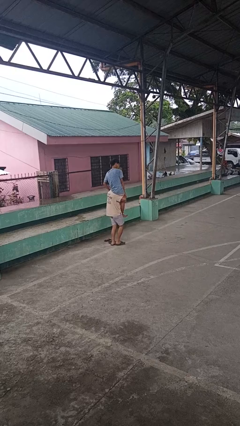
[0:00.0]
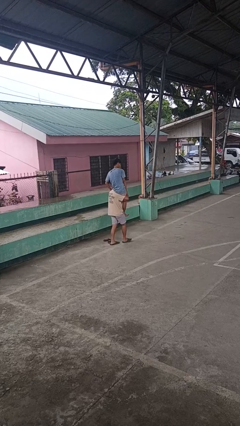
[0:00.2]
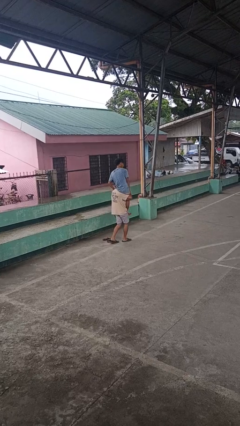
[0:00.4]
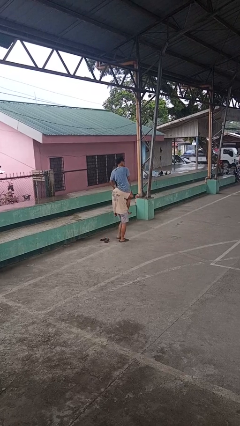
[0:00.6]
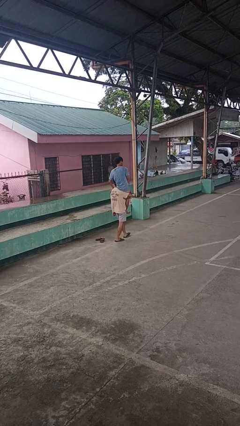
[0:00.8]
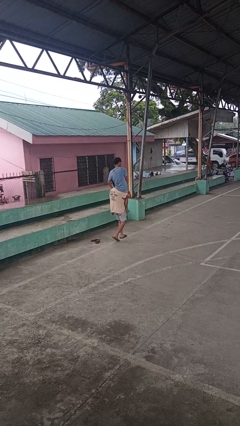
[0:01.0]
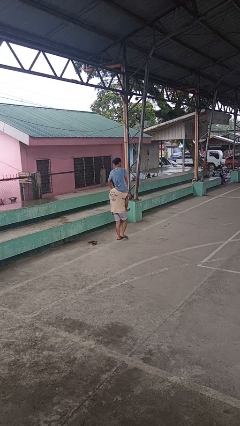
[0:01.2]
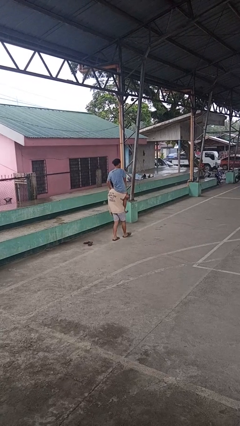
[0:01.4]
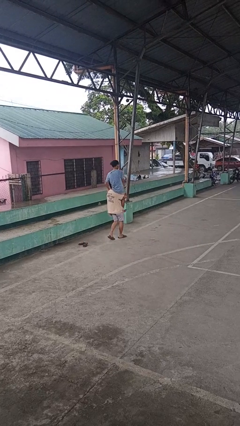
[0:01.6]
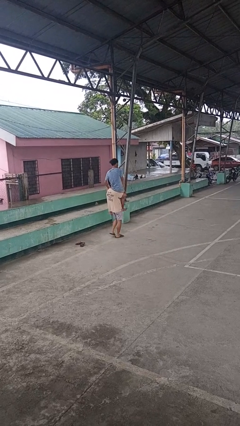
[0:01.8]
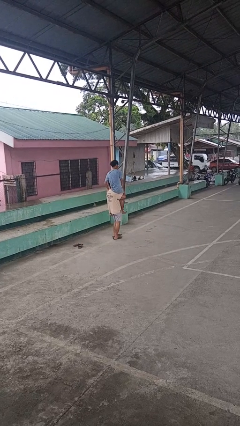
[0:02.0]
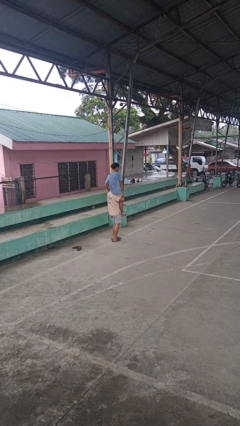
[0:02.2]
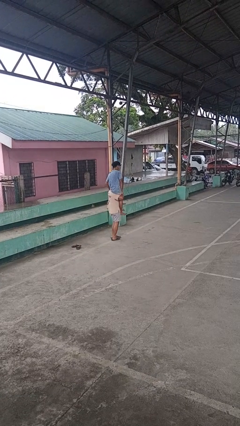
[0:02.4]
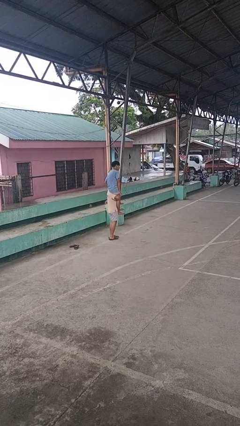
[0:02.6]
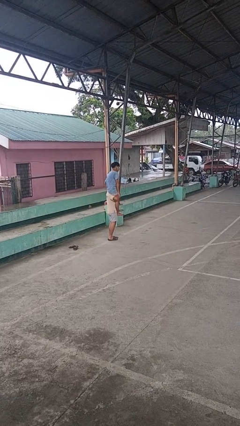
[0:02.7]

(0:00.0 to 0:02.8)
person carries person on shoulders

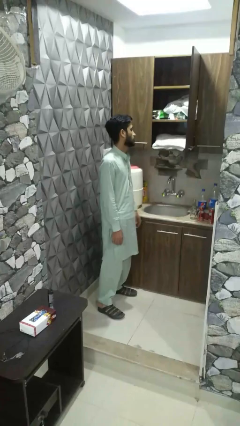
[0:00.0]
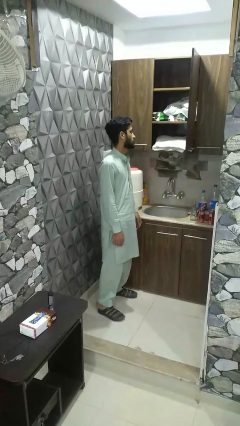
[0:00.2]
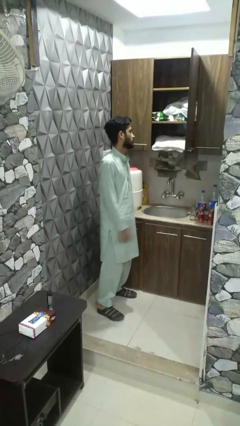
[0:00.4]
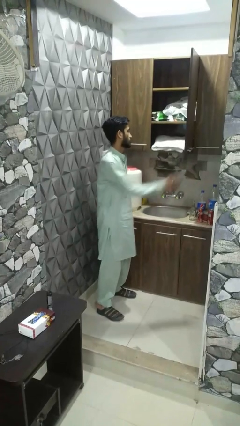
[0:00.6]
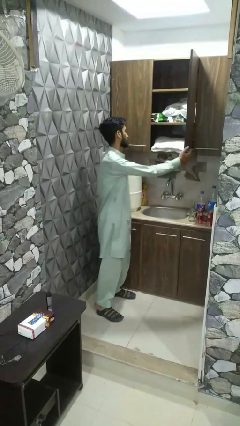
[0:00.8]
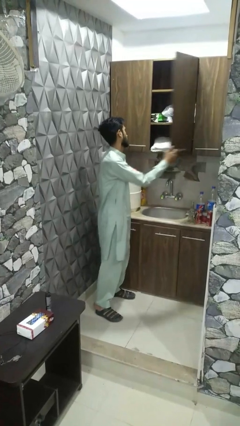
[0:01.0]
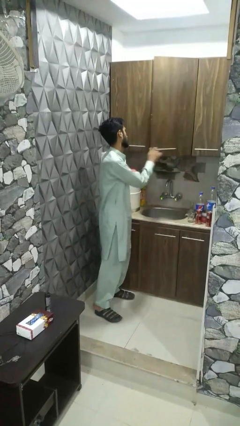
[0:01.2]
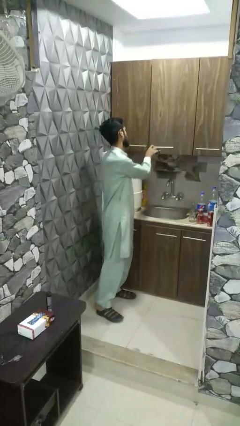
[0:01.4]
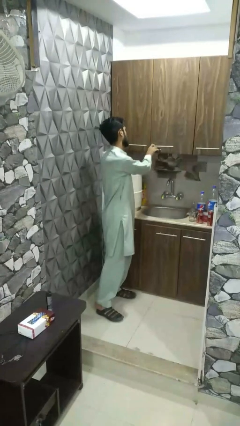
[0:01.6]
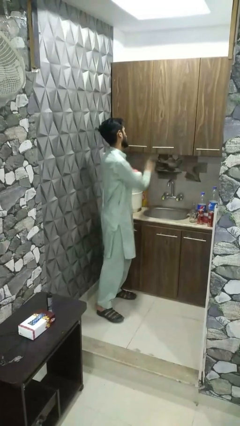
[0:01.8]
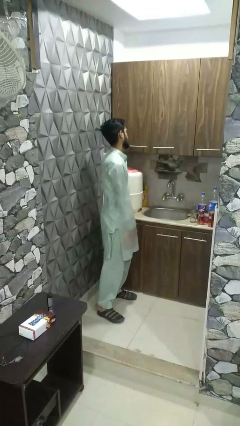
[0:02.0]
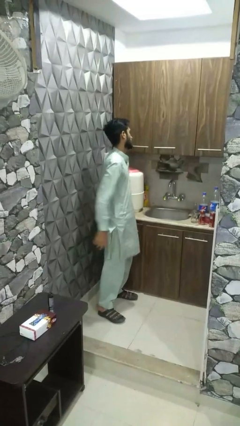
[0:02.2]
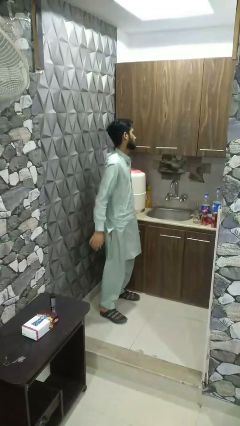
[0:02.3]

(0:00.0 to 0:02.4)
person closes dresser drawer

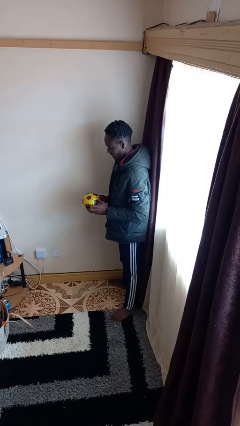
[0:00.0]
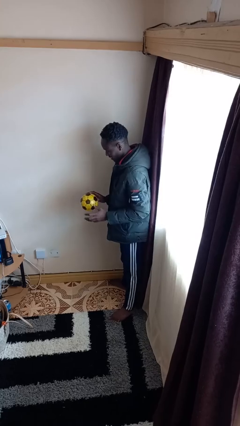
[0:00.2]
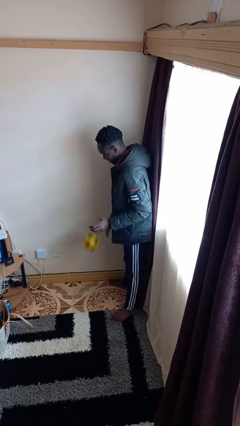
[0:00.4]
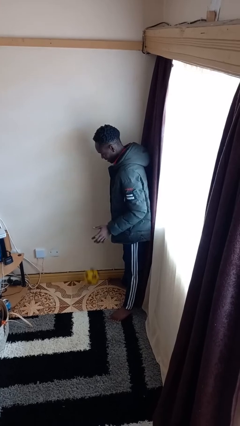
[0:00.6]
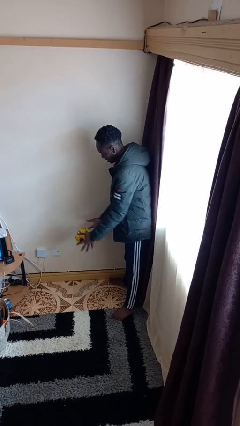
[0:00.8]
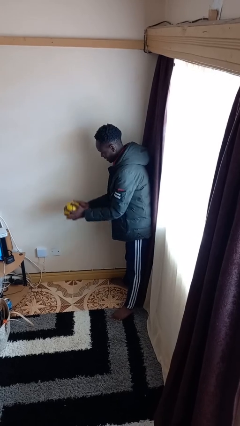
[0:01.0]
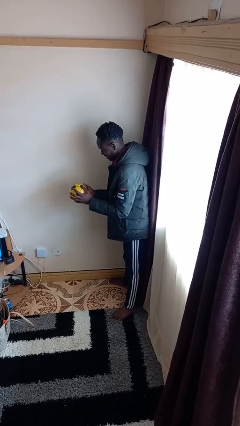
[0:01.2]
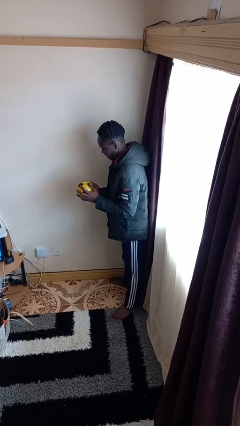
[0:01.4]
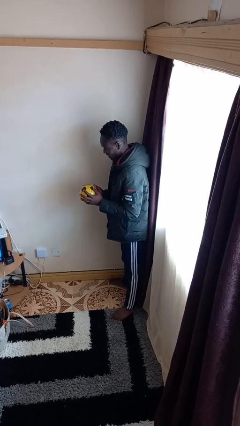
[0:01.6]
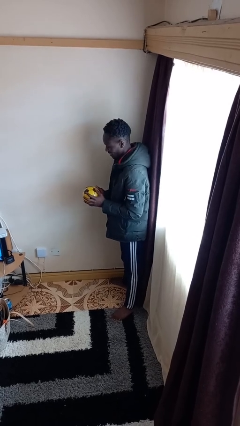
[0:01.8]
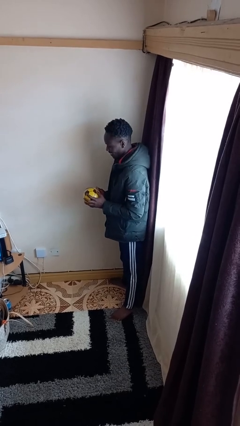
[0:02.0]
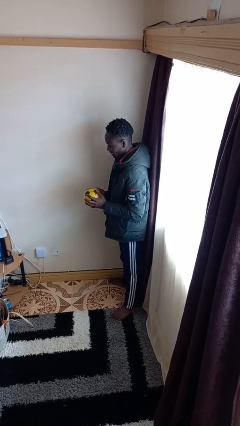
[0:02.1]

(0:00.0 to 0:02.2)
person bounces ball on floor

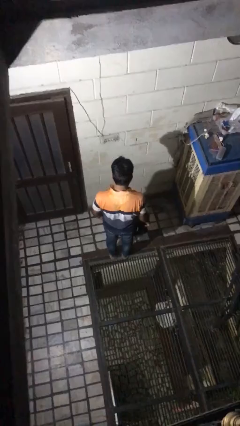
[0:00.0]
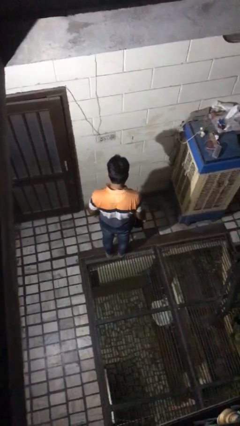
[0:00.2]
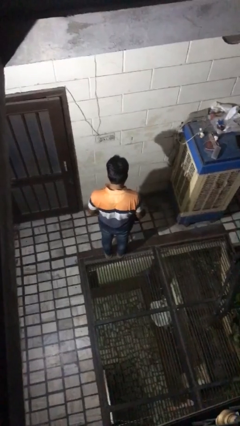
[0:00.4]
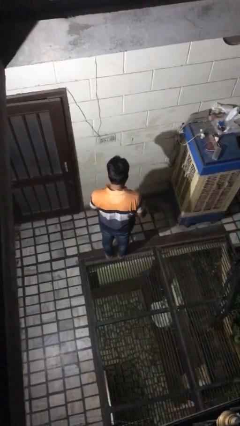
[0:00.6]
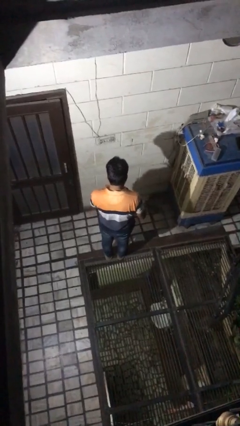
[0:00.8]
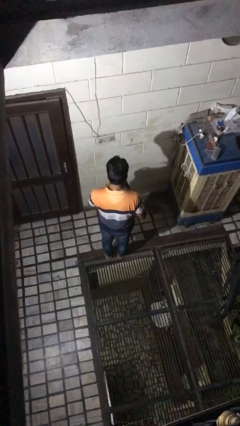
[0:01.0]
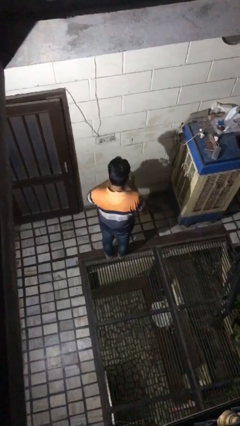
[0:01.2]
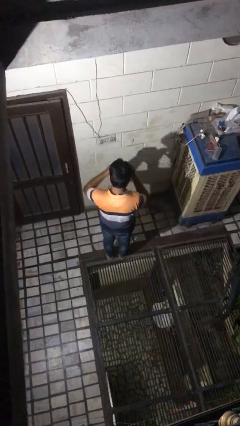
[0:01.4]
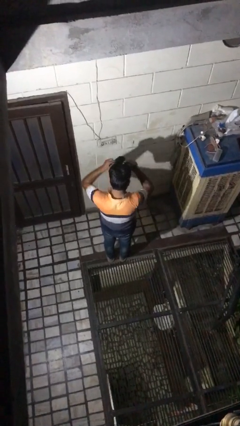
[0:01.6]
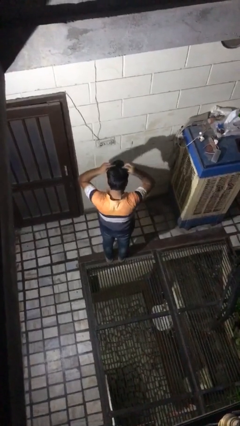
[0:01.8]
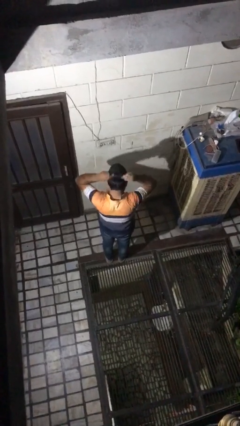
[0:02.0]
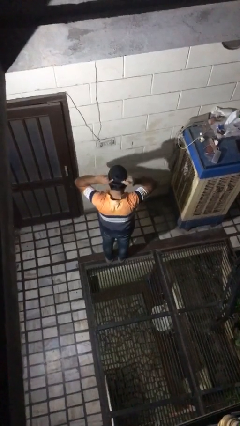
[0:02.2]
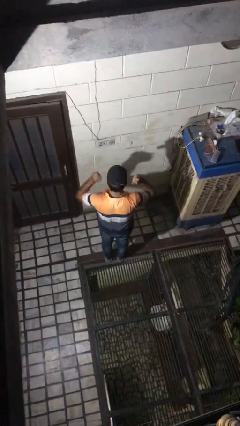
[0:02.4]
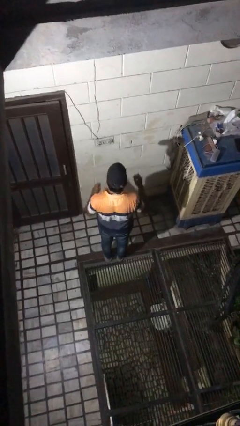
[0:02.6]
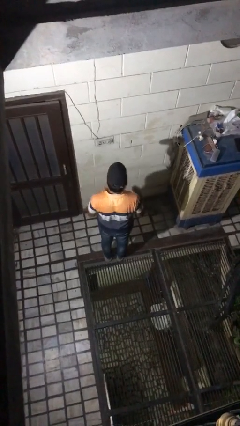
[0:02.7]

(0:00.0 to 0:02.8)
person puts on hat

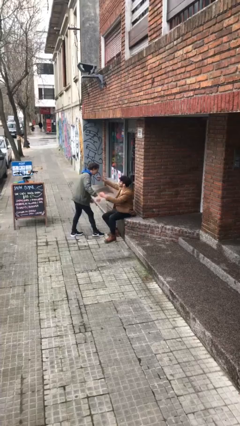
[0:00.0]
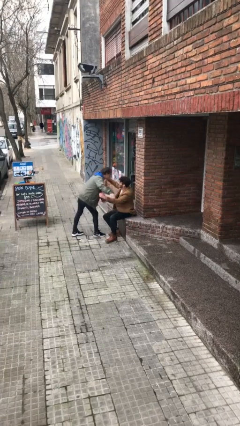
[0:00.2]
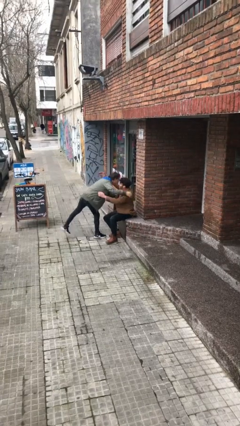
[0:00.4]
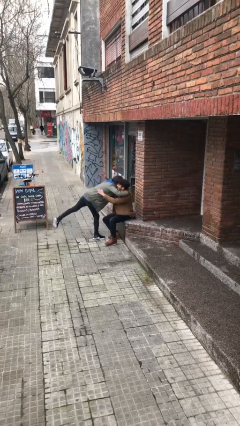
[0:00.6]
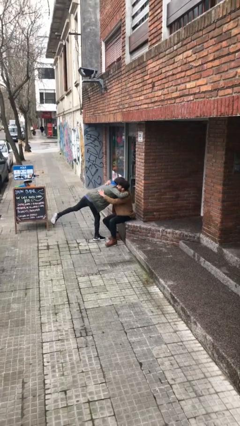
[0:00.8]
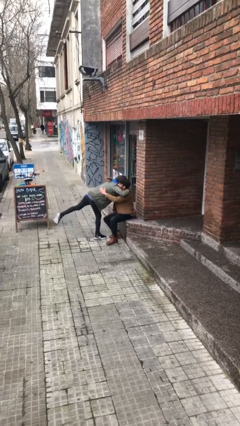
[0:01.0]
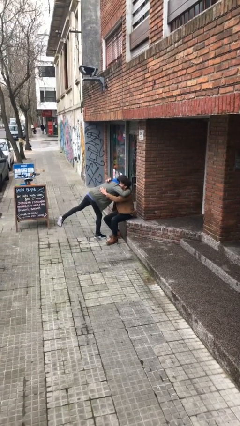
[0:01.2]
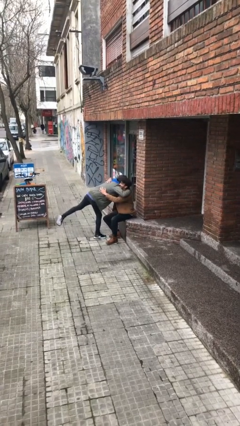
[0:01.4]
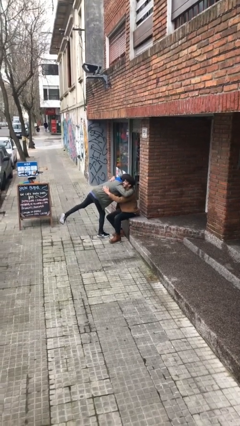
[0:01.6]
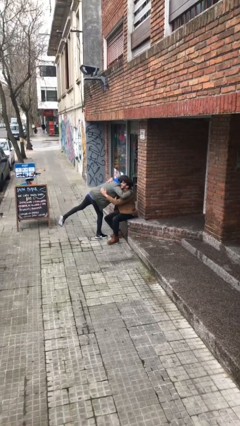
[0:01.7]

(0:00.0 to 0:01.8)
person embraces person

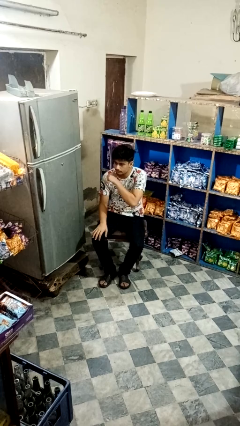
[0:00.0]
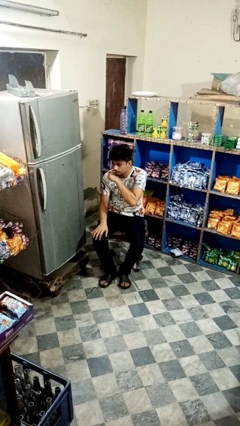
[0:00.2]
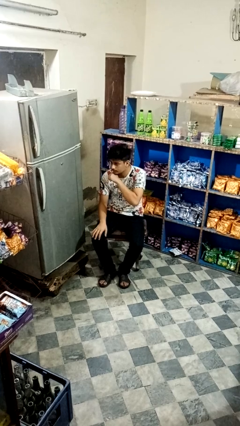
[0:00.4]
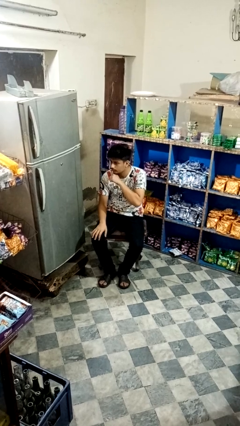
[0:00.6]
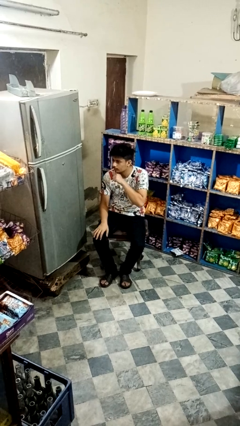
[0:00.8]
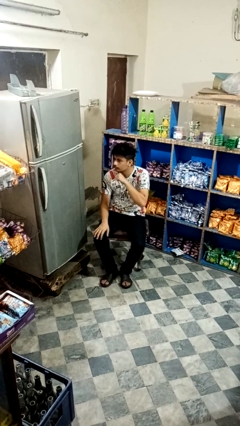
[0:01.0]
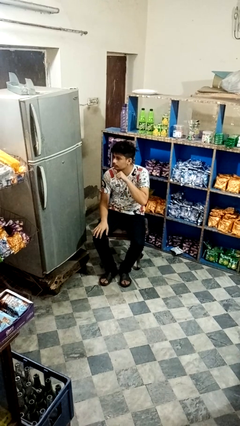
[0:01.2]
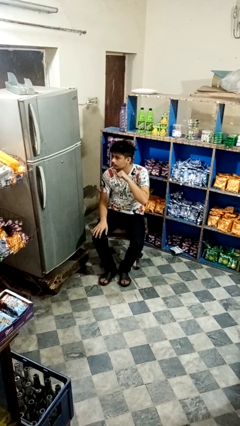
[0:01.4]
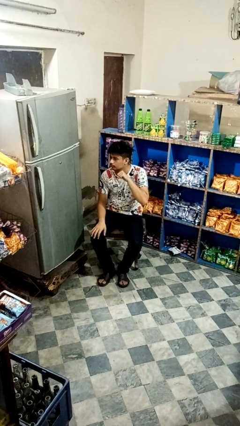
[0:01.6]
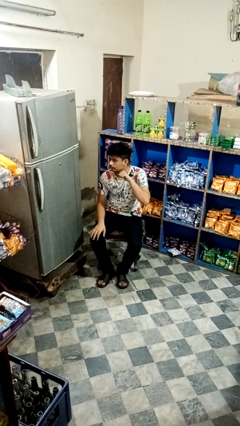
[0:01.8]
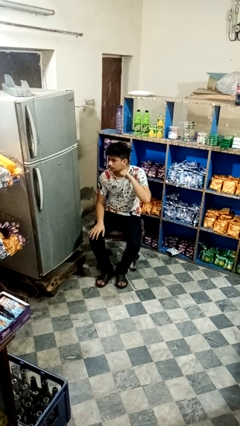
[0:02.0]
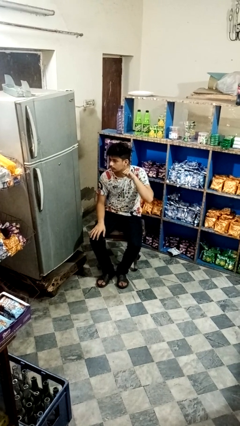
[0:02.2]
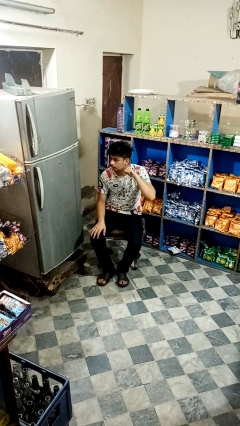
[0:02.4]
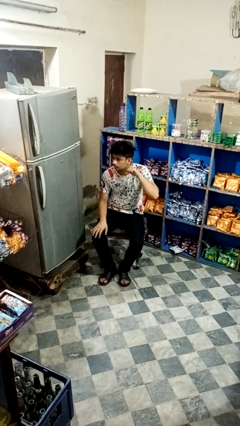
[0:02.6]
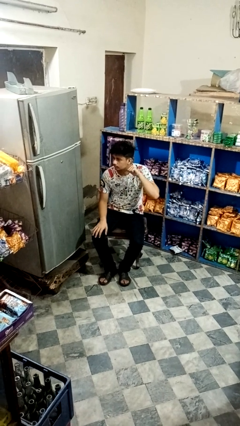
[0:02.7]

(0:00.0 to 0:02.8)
person gestures cut

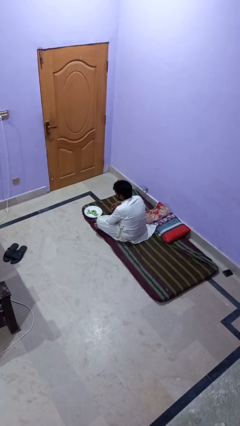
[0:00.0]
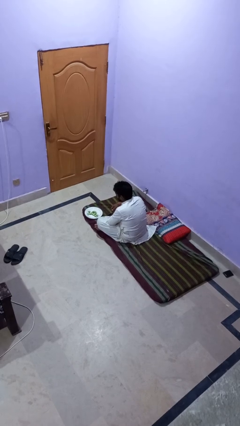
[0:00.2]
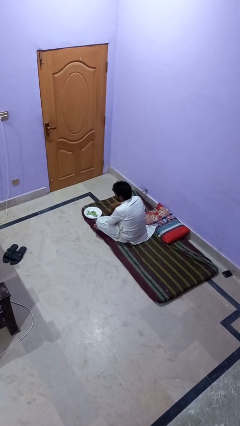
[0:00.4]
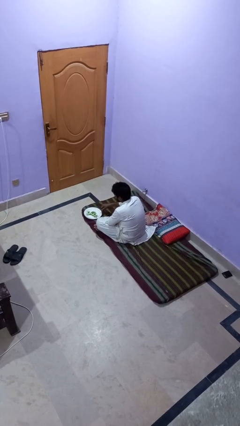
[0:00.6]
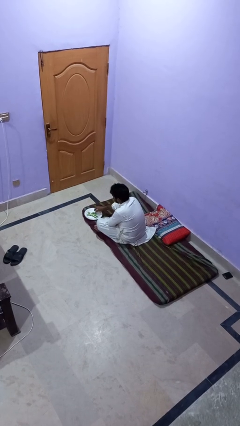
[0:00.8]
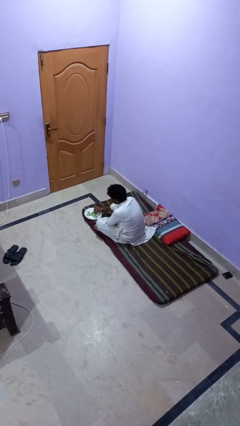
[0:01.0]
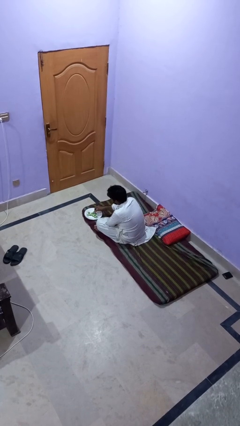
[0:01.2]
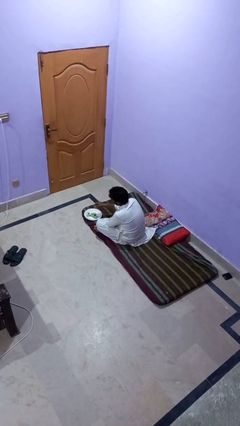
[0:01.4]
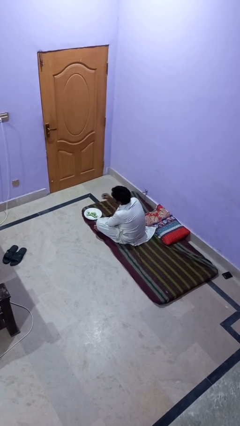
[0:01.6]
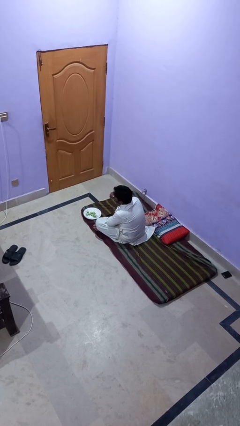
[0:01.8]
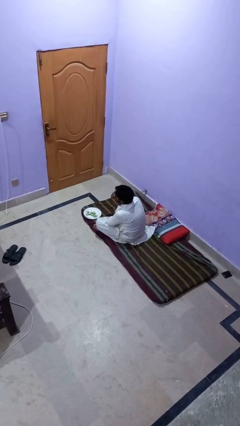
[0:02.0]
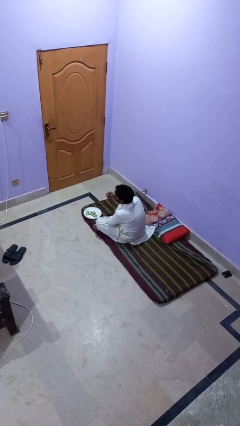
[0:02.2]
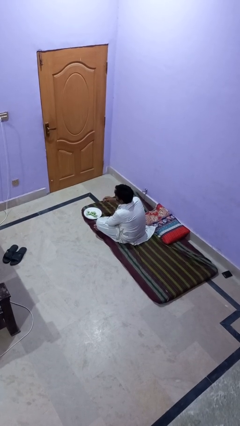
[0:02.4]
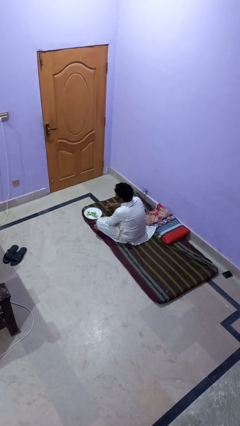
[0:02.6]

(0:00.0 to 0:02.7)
person eats with hands

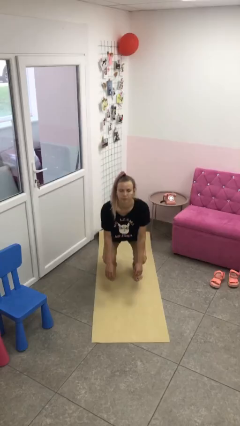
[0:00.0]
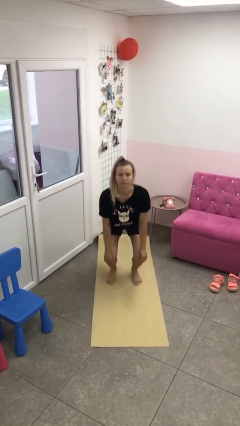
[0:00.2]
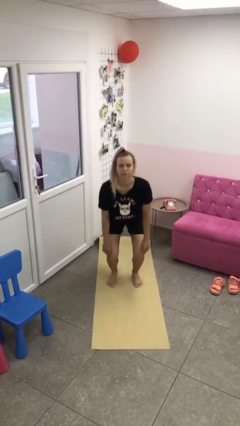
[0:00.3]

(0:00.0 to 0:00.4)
person stands up
